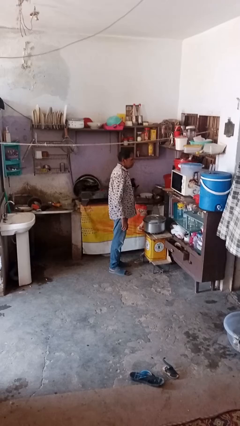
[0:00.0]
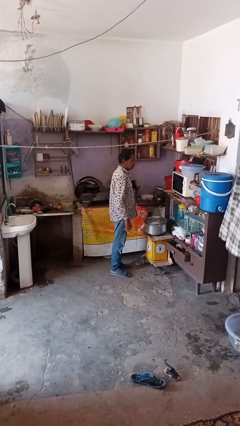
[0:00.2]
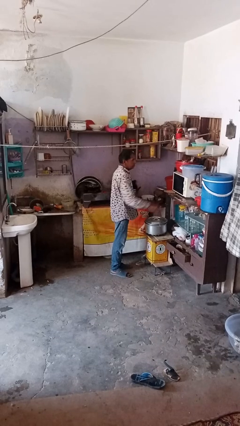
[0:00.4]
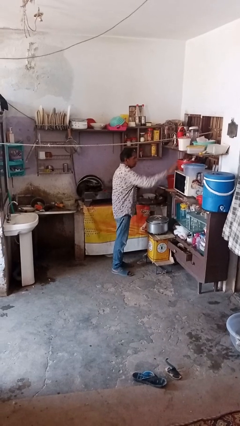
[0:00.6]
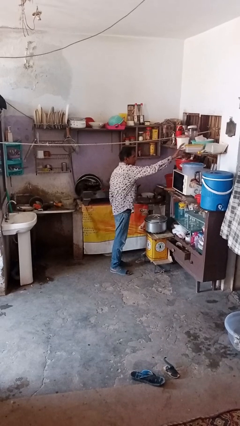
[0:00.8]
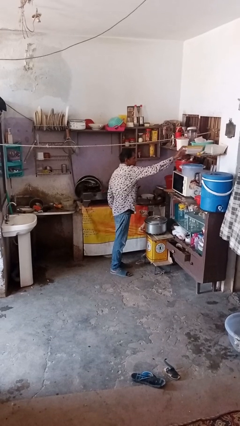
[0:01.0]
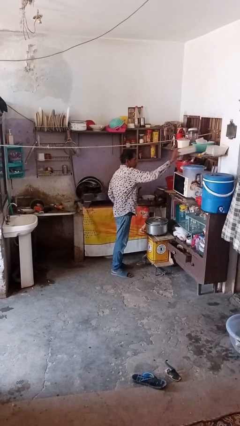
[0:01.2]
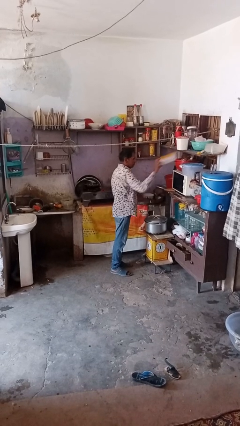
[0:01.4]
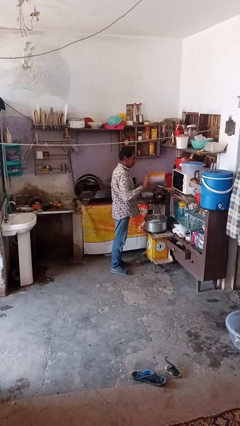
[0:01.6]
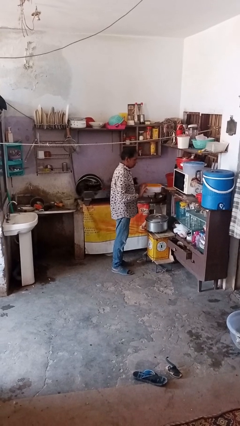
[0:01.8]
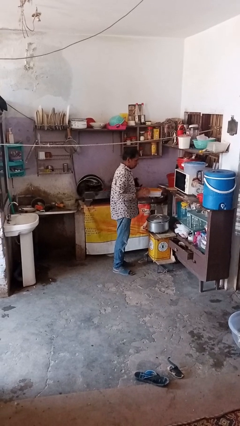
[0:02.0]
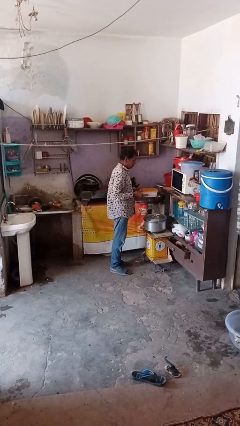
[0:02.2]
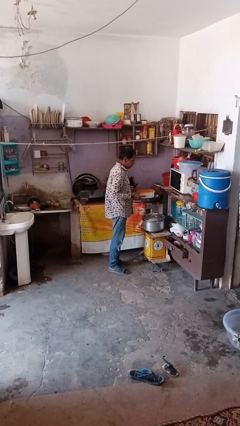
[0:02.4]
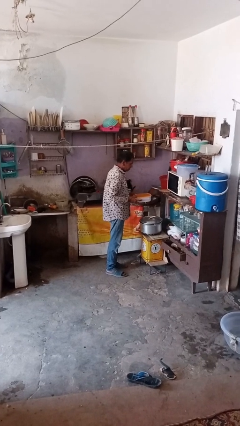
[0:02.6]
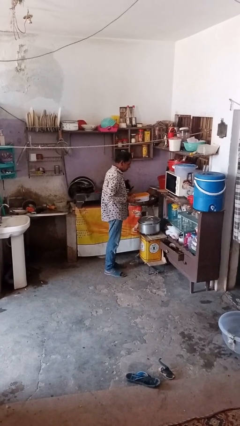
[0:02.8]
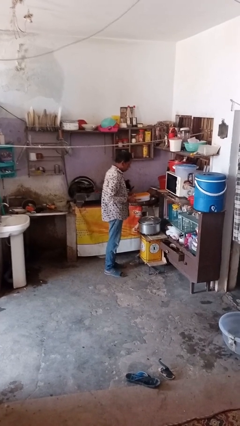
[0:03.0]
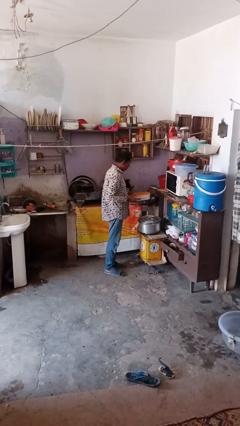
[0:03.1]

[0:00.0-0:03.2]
person picks up object from shelf

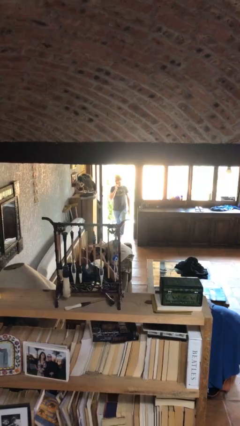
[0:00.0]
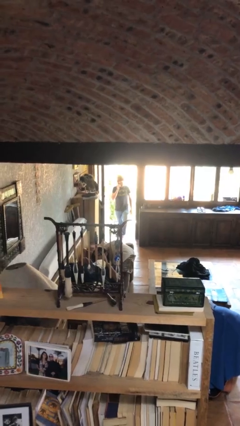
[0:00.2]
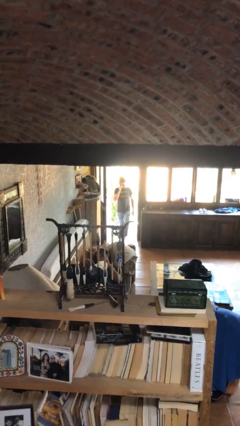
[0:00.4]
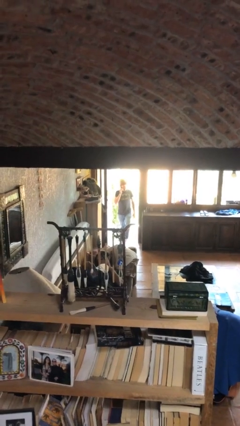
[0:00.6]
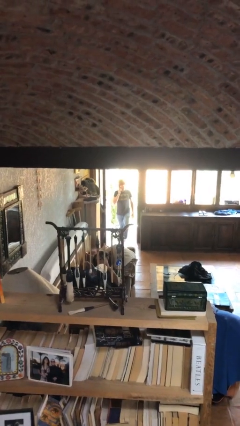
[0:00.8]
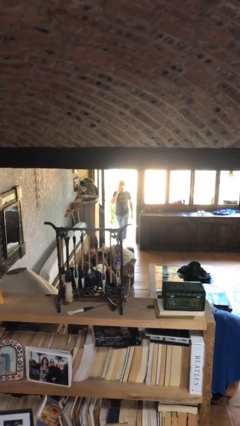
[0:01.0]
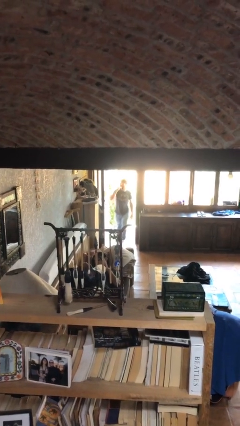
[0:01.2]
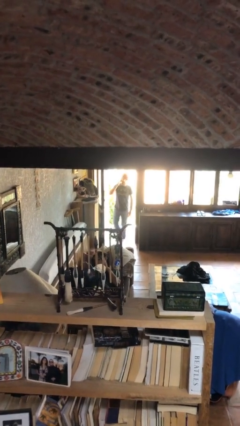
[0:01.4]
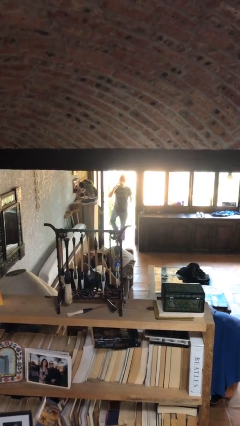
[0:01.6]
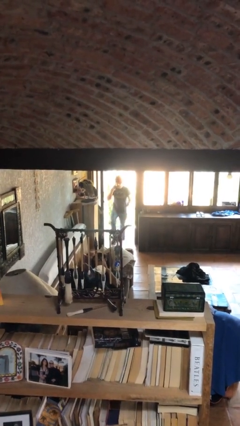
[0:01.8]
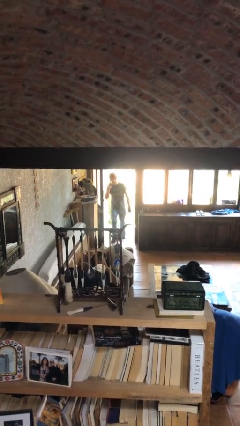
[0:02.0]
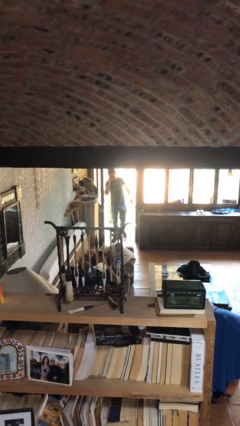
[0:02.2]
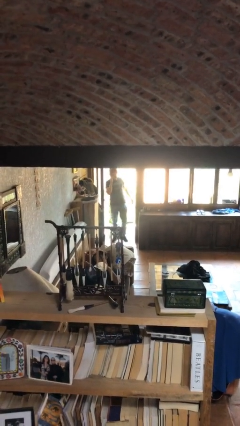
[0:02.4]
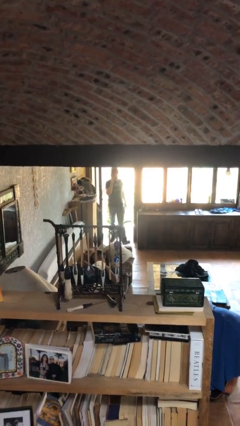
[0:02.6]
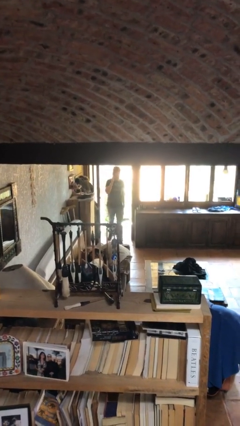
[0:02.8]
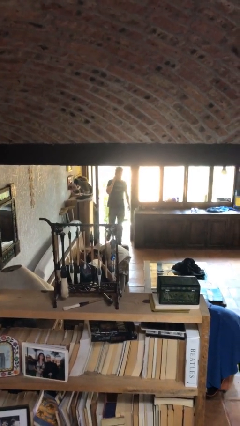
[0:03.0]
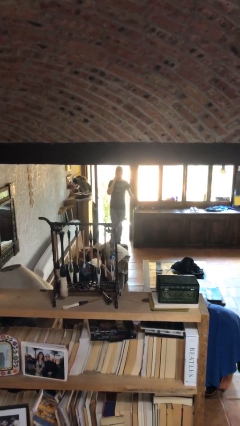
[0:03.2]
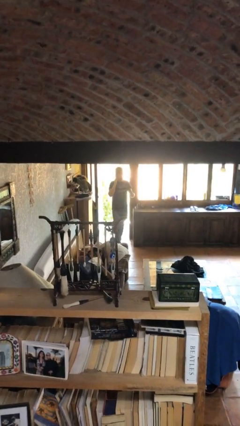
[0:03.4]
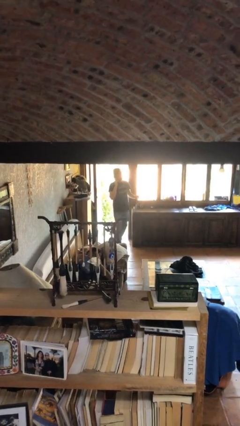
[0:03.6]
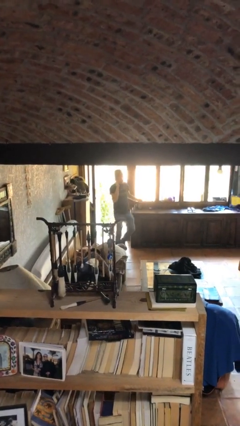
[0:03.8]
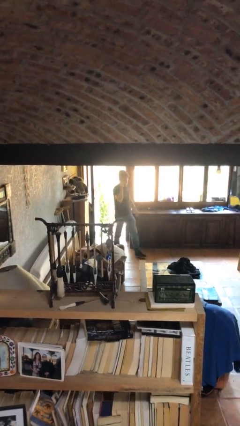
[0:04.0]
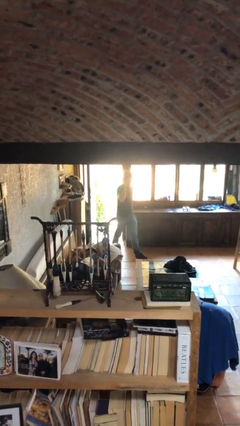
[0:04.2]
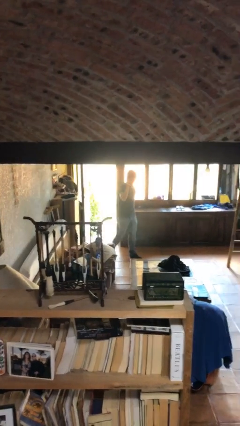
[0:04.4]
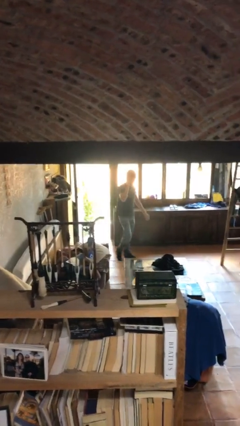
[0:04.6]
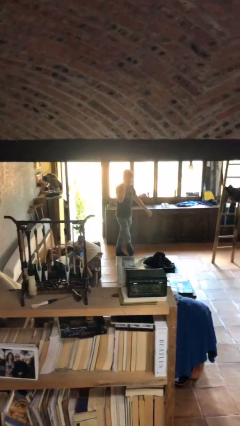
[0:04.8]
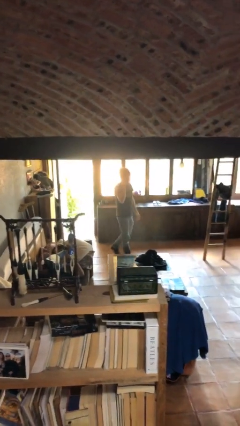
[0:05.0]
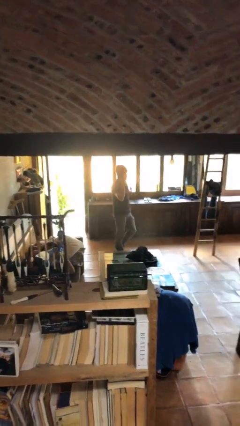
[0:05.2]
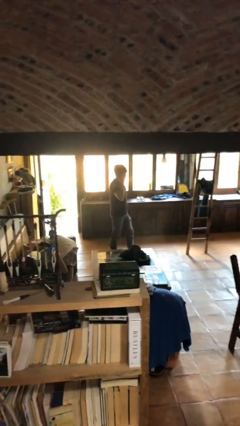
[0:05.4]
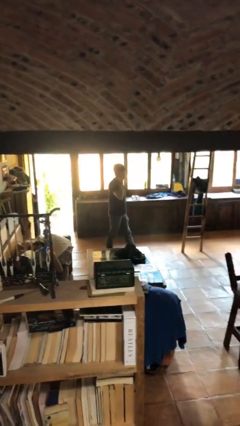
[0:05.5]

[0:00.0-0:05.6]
person enters scene through structure

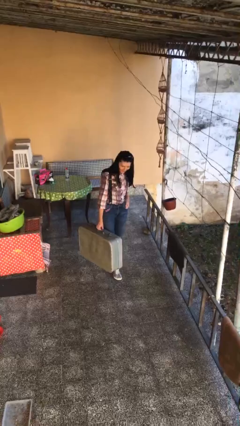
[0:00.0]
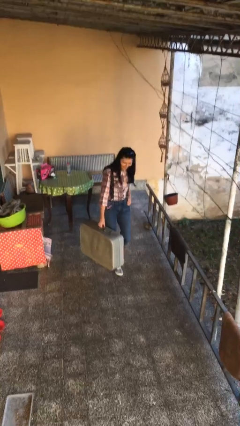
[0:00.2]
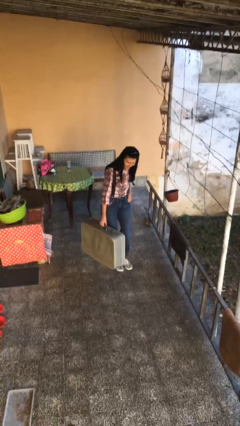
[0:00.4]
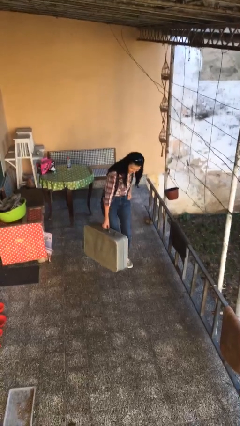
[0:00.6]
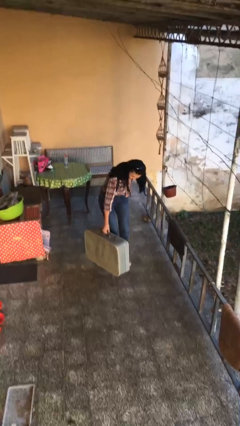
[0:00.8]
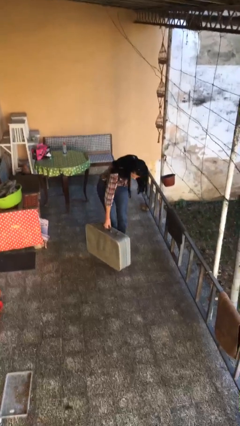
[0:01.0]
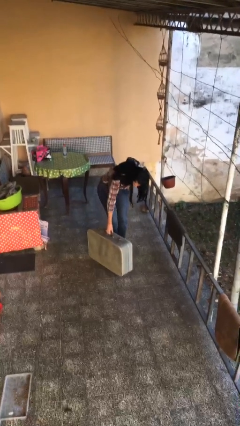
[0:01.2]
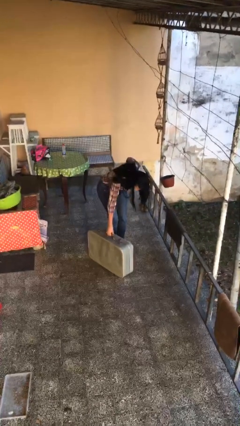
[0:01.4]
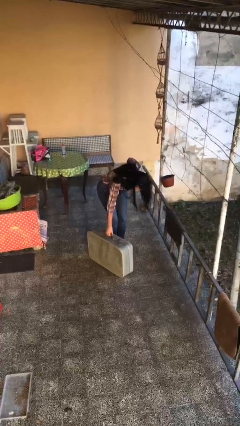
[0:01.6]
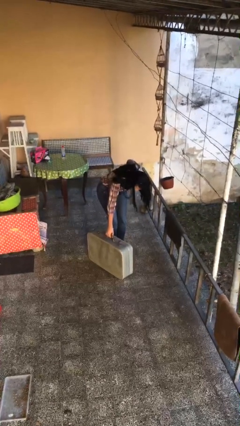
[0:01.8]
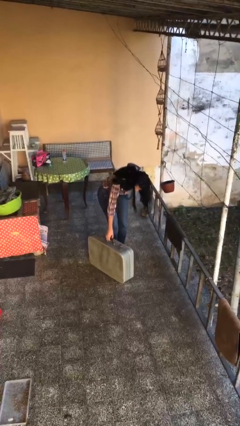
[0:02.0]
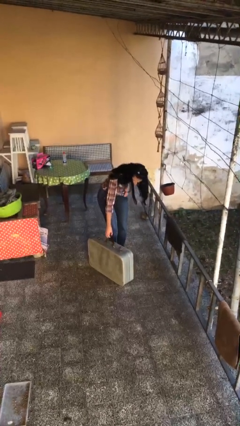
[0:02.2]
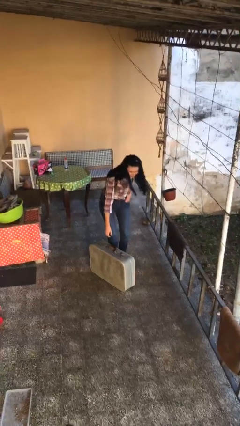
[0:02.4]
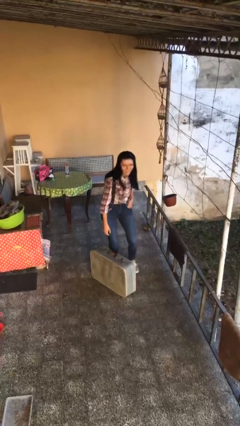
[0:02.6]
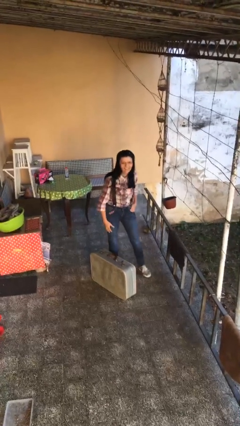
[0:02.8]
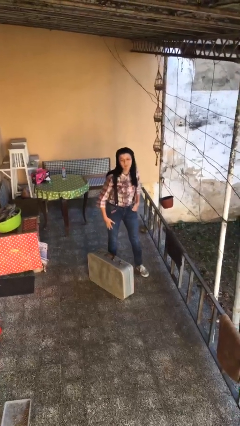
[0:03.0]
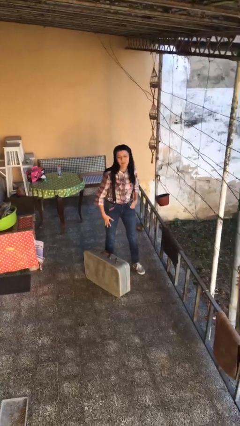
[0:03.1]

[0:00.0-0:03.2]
person puts down object on floor

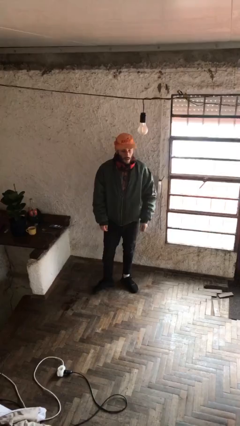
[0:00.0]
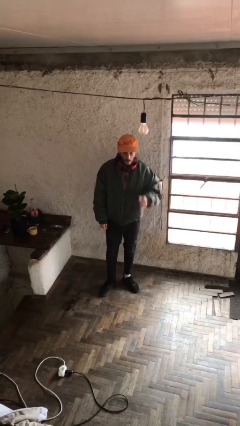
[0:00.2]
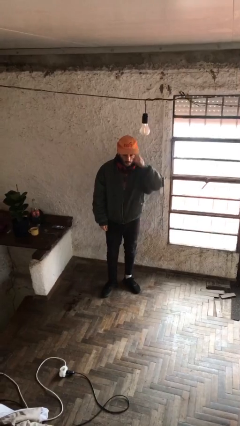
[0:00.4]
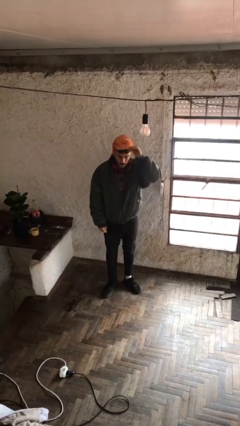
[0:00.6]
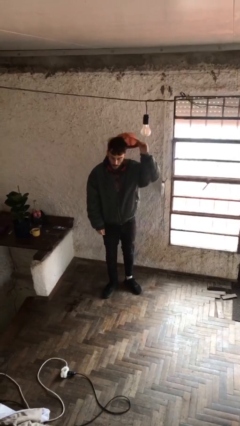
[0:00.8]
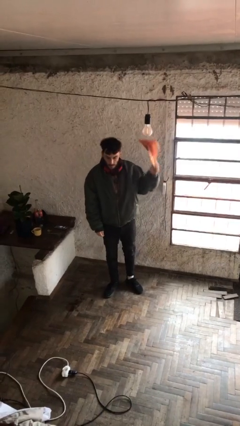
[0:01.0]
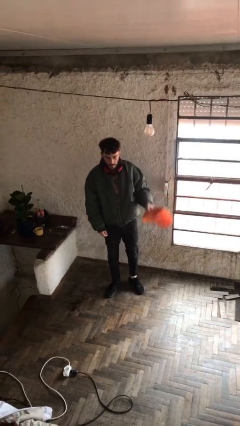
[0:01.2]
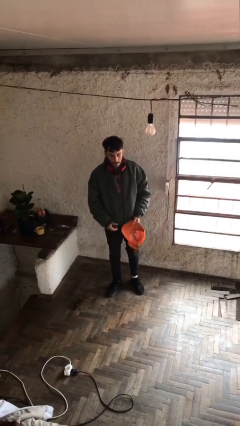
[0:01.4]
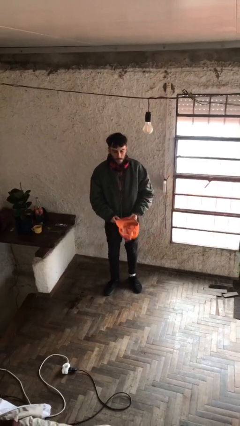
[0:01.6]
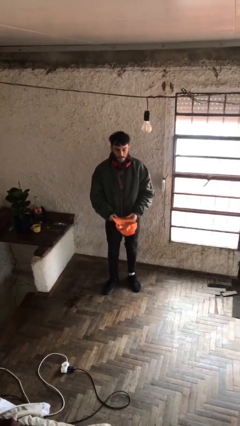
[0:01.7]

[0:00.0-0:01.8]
person takes off hat

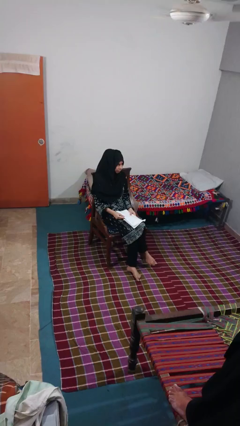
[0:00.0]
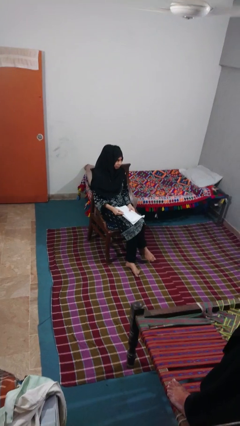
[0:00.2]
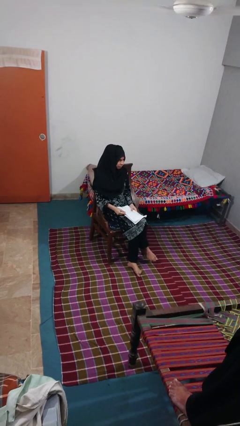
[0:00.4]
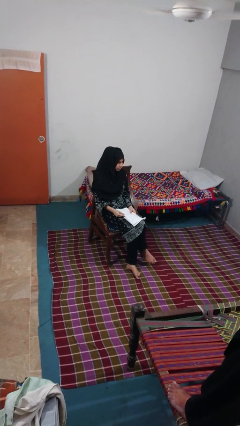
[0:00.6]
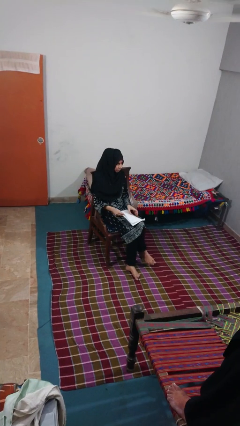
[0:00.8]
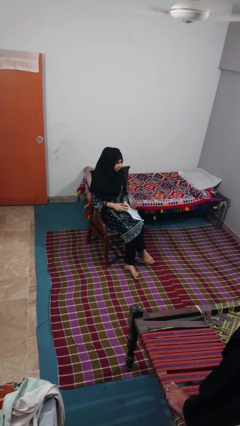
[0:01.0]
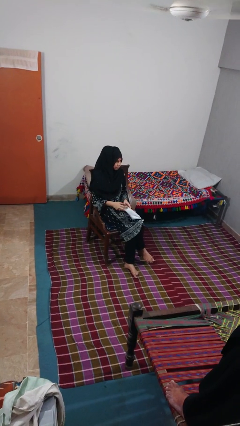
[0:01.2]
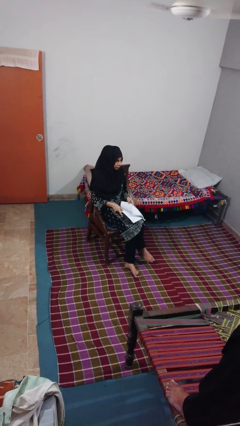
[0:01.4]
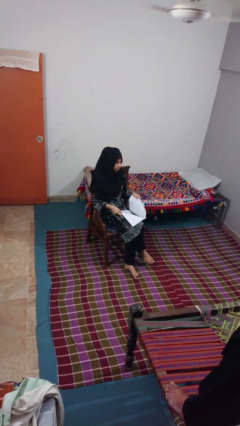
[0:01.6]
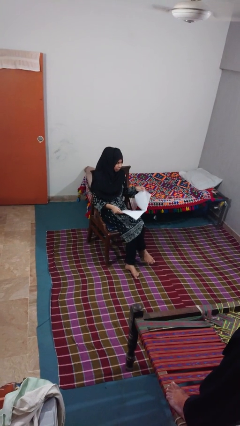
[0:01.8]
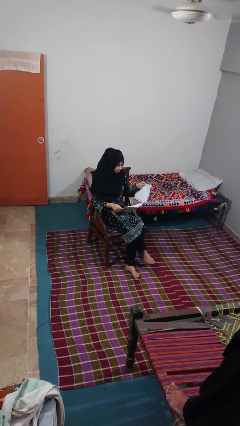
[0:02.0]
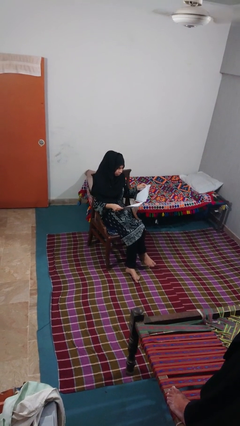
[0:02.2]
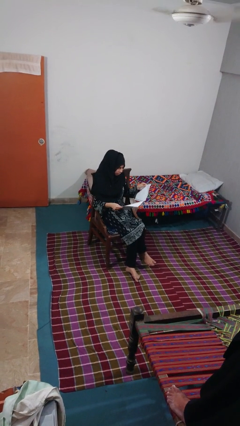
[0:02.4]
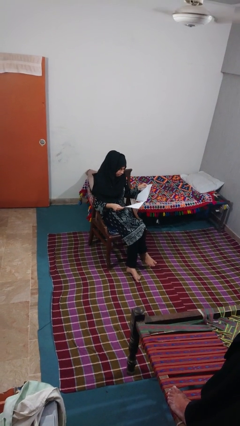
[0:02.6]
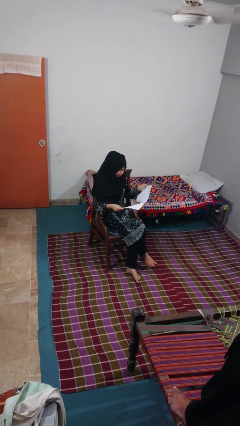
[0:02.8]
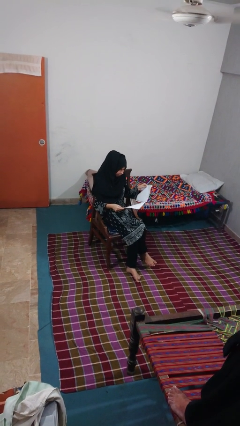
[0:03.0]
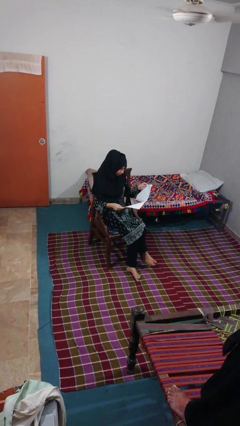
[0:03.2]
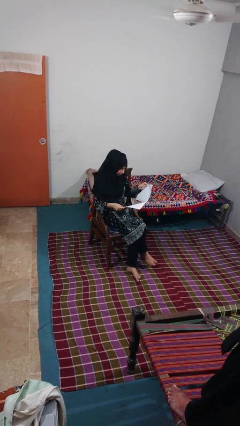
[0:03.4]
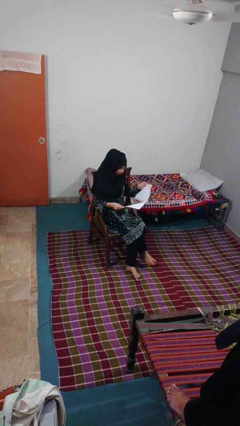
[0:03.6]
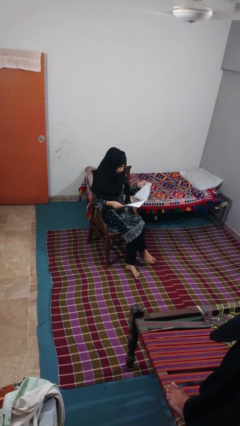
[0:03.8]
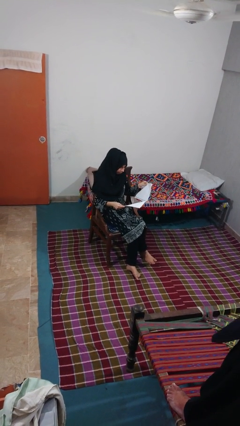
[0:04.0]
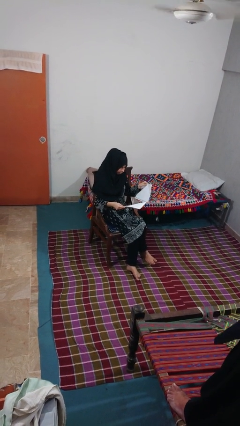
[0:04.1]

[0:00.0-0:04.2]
person reads newspaper
